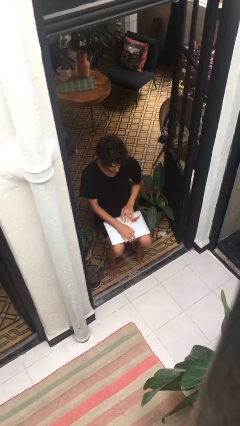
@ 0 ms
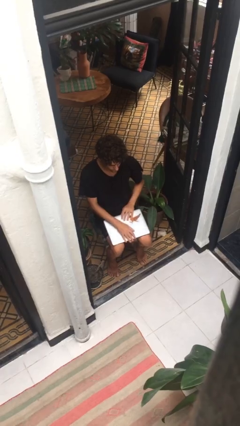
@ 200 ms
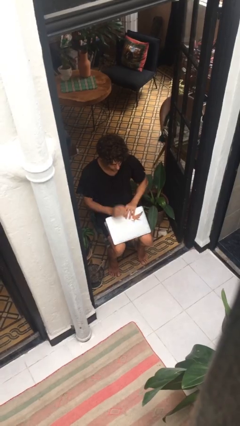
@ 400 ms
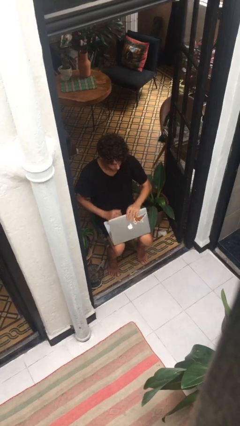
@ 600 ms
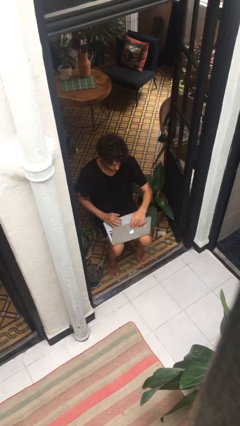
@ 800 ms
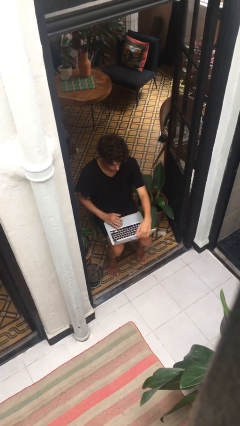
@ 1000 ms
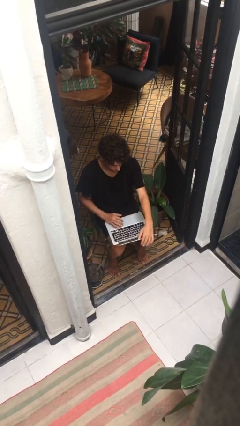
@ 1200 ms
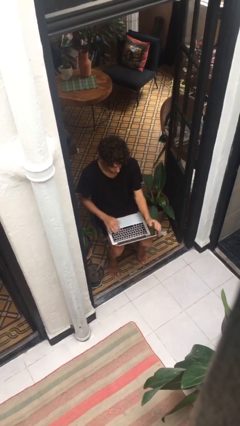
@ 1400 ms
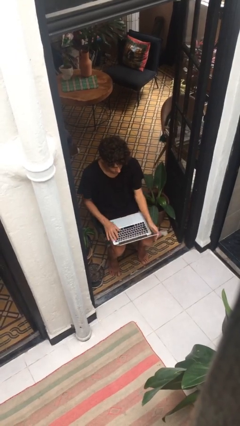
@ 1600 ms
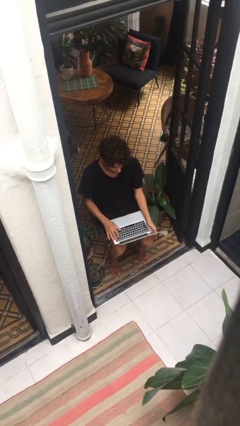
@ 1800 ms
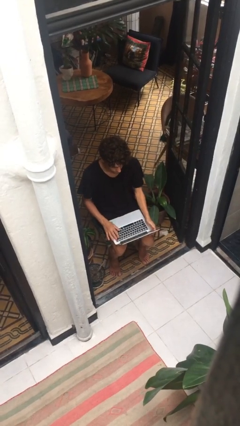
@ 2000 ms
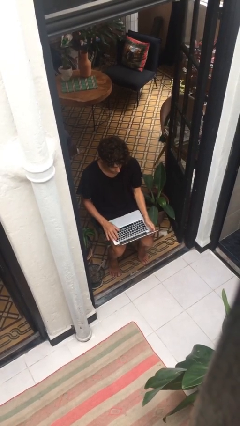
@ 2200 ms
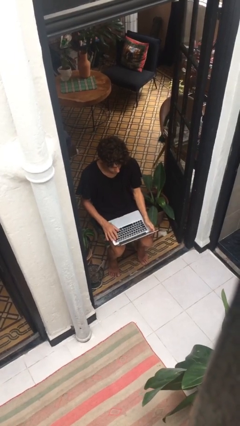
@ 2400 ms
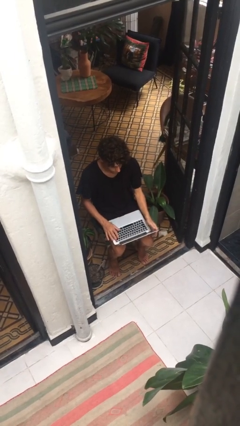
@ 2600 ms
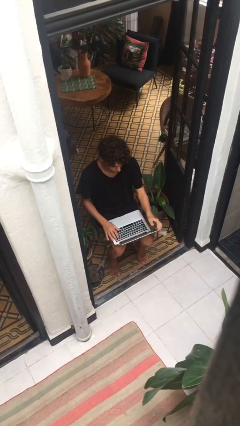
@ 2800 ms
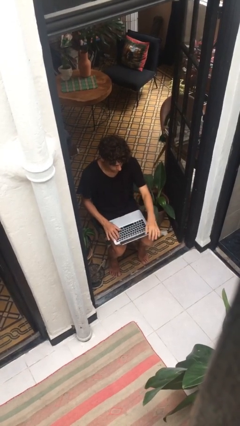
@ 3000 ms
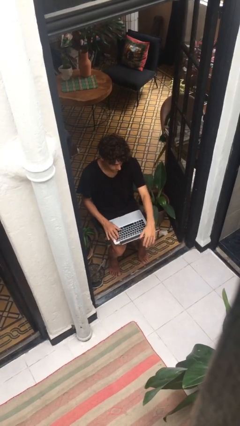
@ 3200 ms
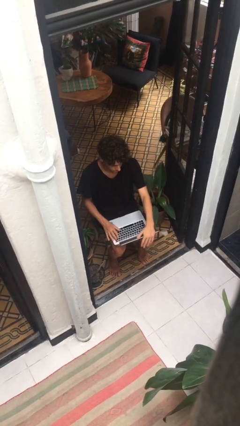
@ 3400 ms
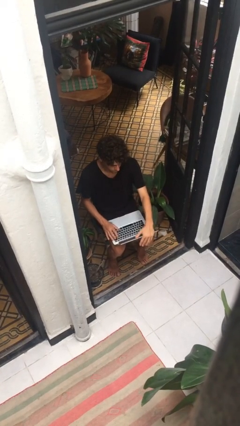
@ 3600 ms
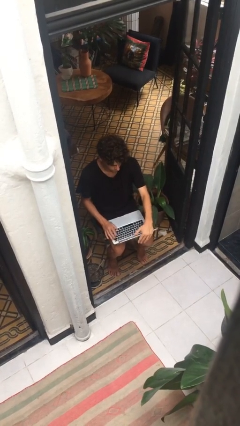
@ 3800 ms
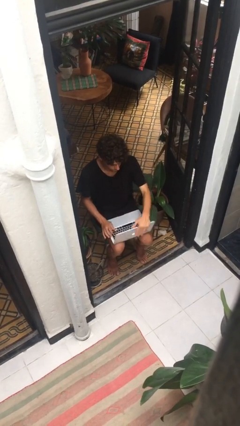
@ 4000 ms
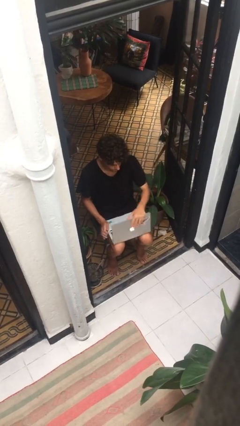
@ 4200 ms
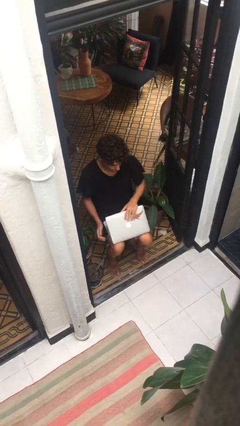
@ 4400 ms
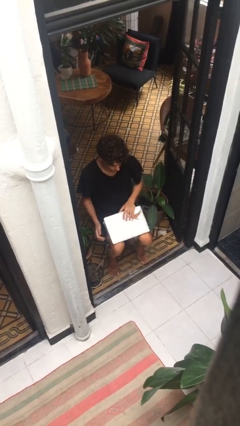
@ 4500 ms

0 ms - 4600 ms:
person interacts with laptop

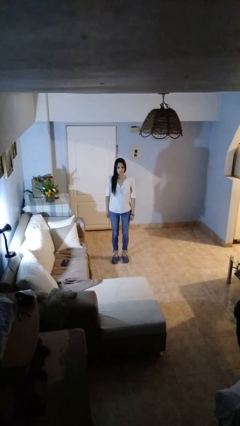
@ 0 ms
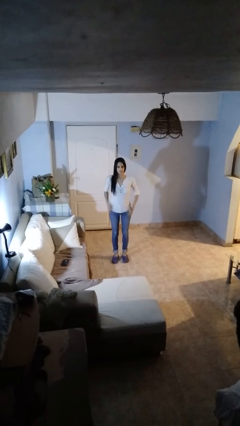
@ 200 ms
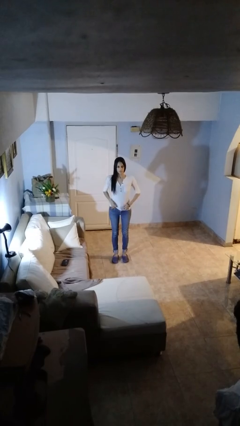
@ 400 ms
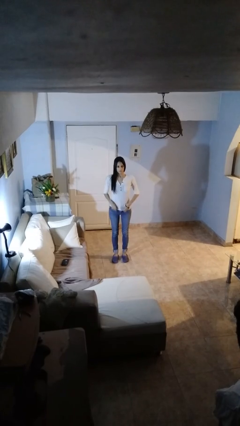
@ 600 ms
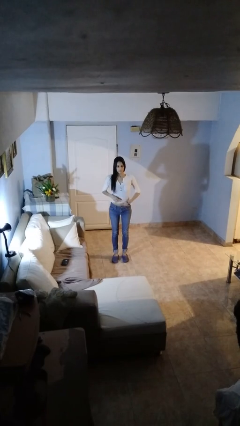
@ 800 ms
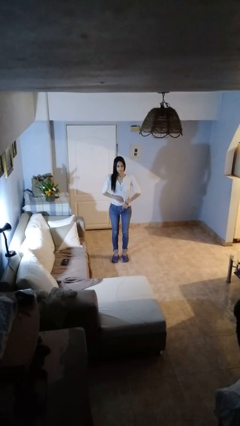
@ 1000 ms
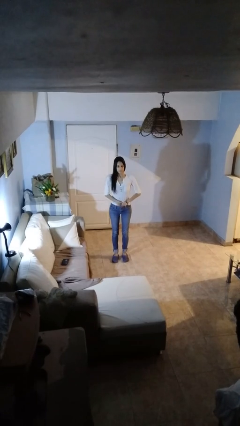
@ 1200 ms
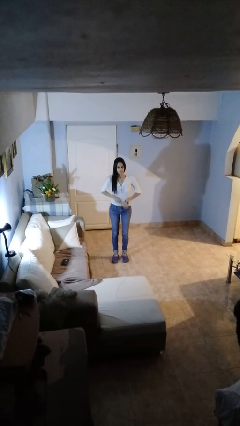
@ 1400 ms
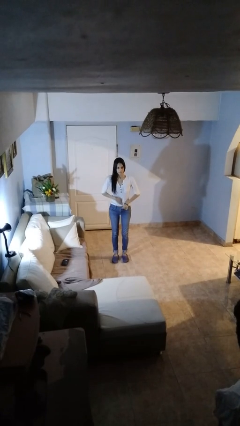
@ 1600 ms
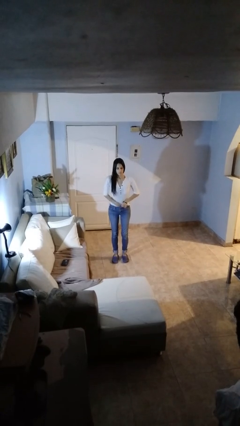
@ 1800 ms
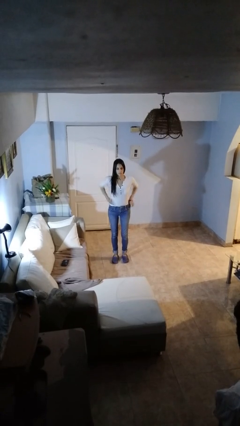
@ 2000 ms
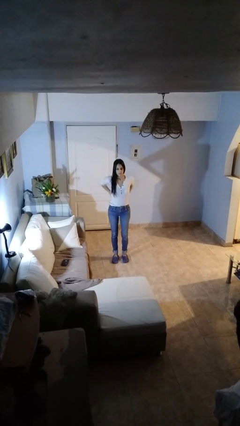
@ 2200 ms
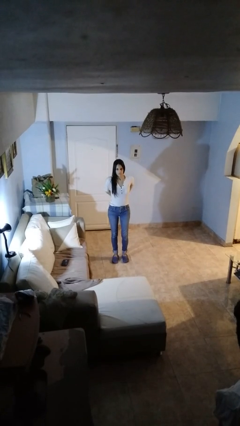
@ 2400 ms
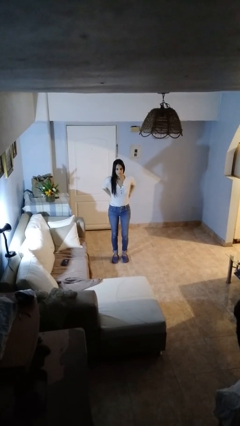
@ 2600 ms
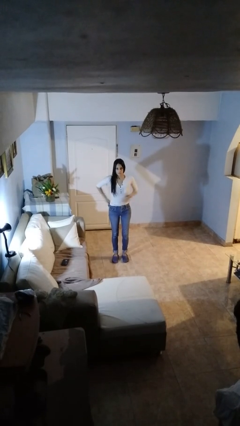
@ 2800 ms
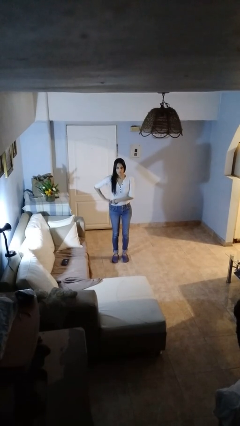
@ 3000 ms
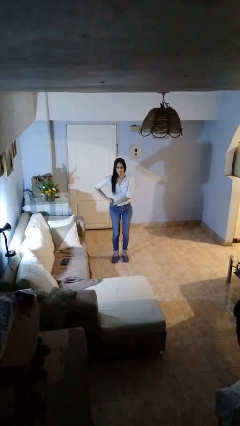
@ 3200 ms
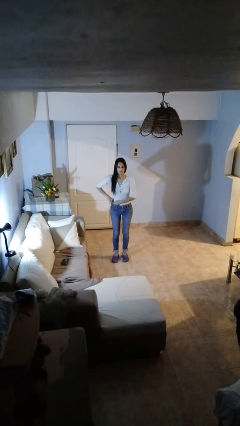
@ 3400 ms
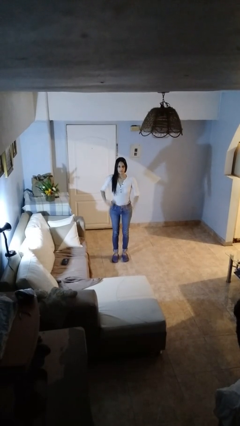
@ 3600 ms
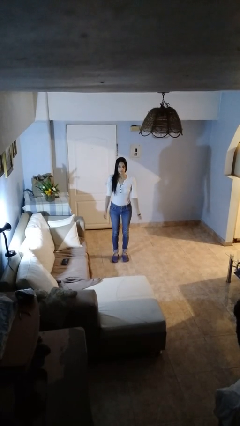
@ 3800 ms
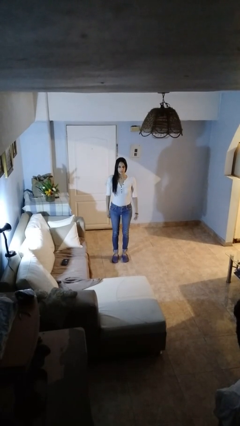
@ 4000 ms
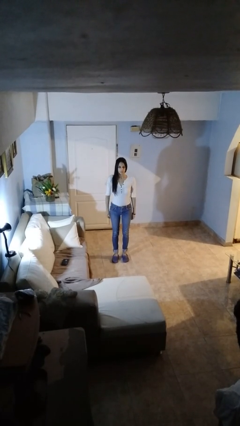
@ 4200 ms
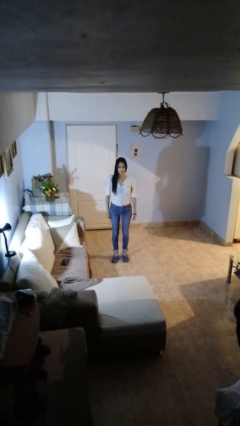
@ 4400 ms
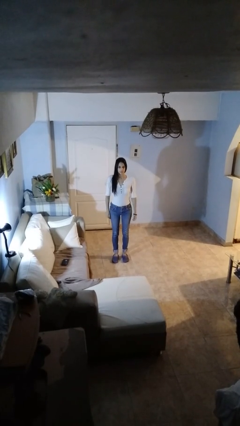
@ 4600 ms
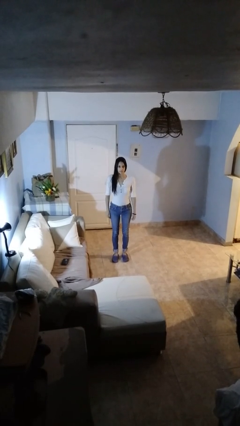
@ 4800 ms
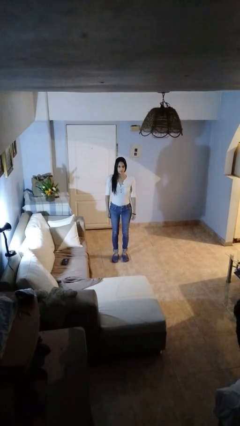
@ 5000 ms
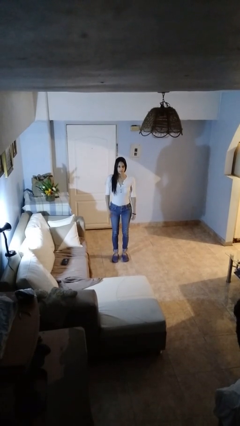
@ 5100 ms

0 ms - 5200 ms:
person tucks in shirt

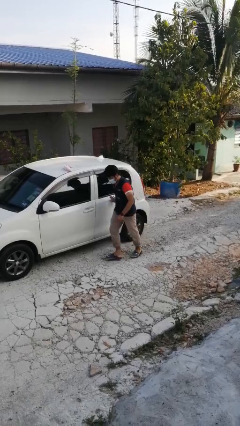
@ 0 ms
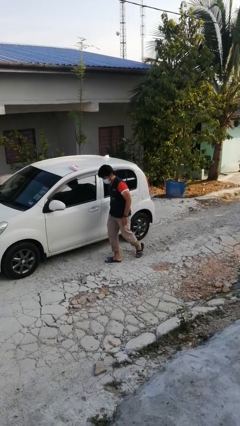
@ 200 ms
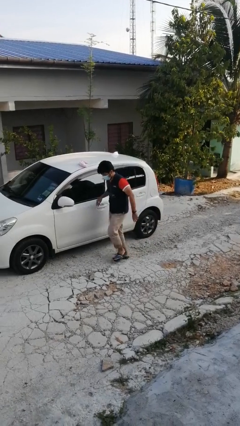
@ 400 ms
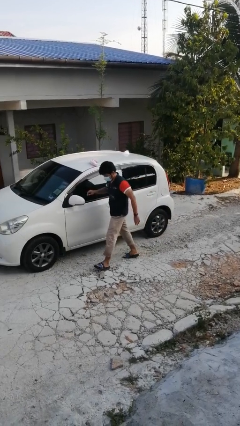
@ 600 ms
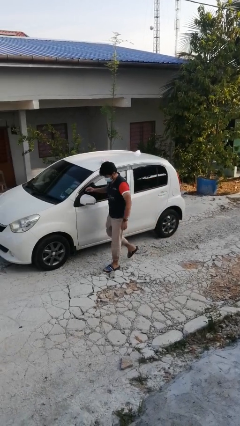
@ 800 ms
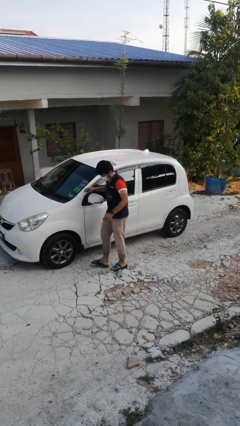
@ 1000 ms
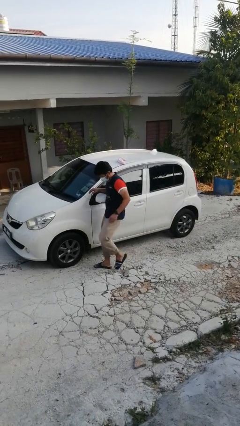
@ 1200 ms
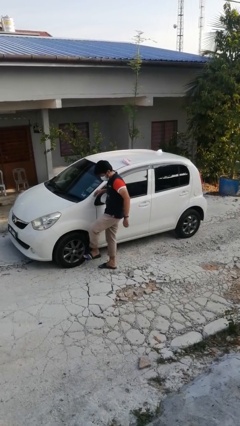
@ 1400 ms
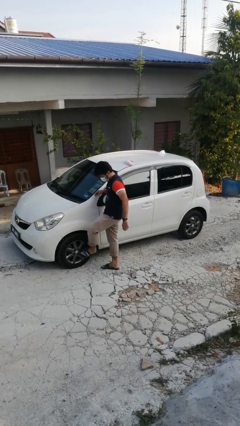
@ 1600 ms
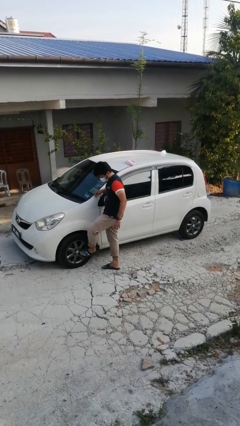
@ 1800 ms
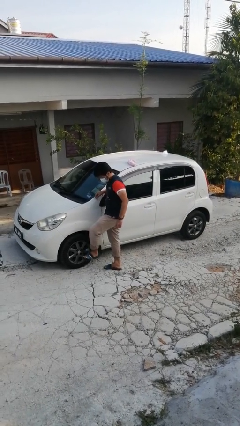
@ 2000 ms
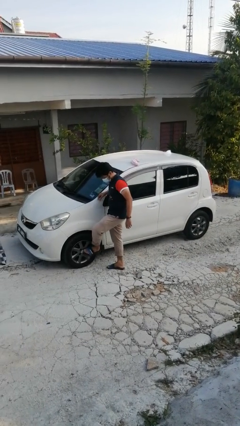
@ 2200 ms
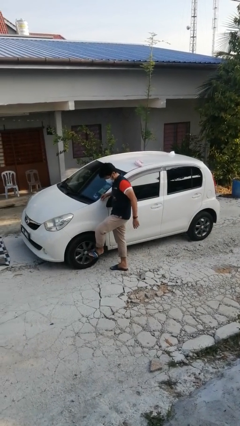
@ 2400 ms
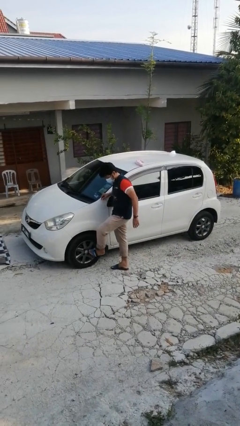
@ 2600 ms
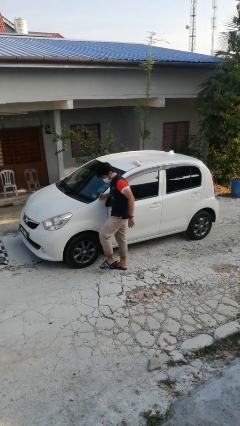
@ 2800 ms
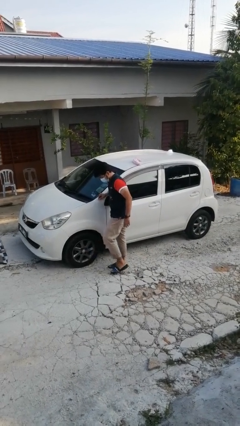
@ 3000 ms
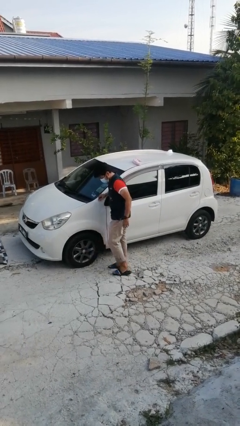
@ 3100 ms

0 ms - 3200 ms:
person kicks car tires

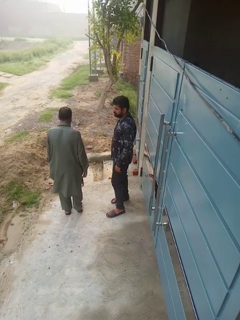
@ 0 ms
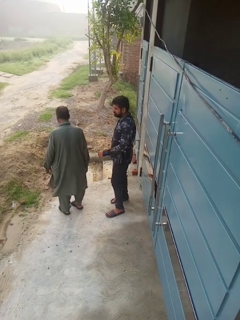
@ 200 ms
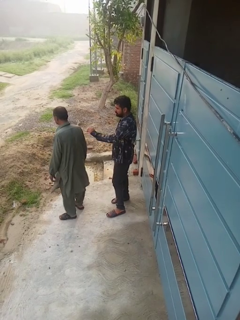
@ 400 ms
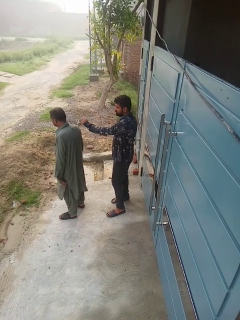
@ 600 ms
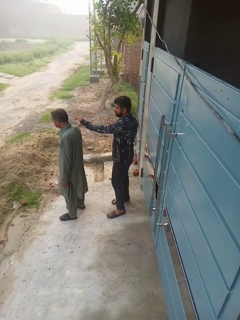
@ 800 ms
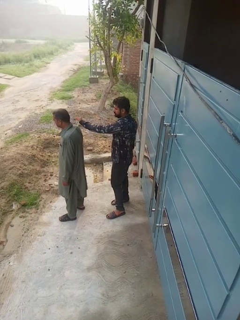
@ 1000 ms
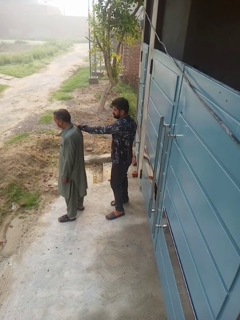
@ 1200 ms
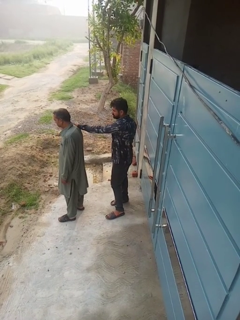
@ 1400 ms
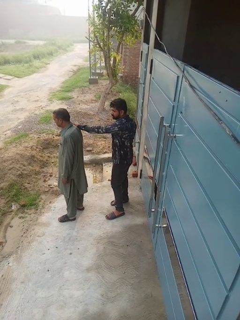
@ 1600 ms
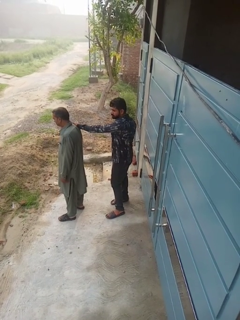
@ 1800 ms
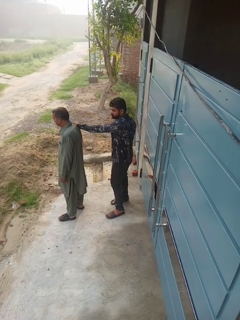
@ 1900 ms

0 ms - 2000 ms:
person grabs person by shoulder

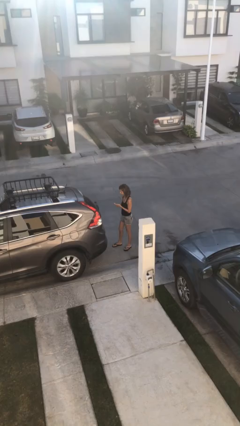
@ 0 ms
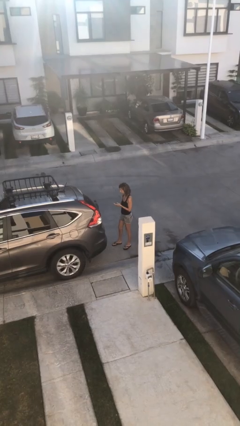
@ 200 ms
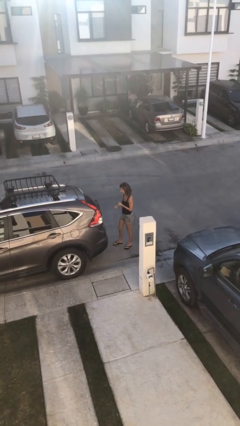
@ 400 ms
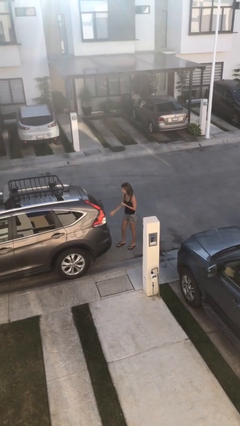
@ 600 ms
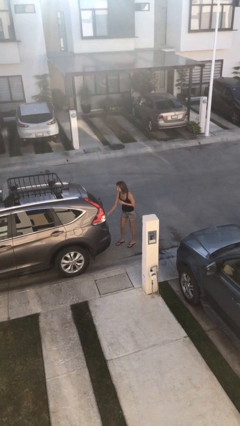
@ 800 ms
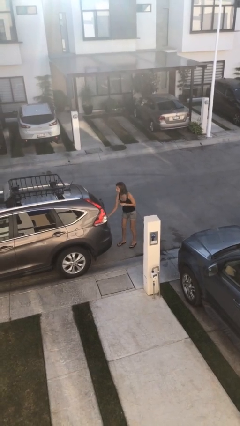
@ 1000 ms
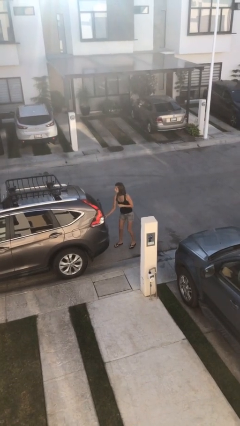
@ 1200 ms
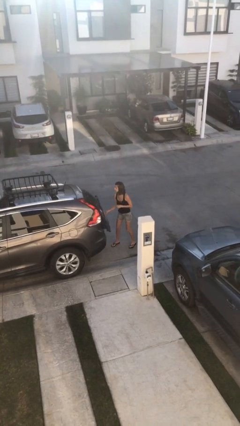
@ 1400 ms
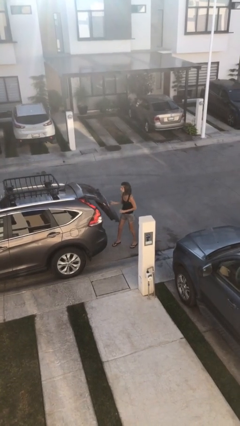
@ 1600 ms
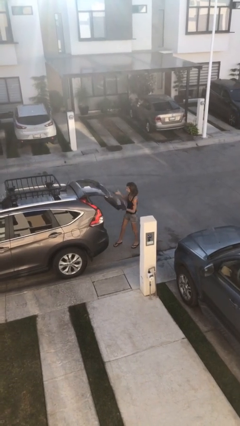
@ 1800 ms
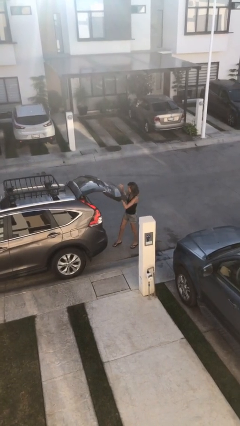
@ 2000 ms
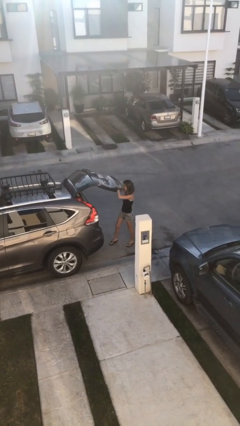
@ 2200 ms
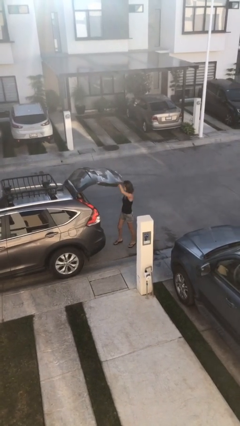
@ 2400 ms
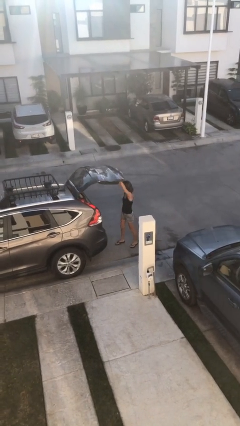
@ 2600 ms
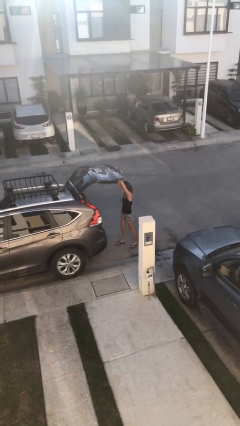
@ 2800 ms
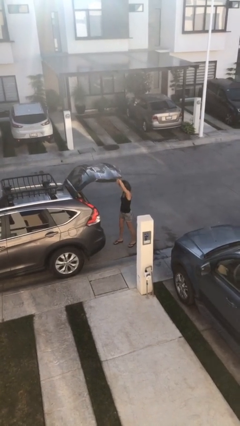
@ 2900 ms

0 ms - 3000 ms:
person opens car trunk
